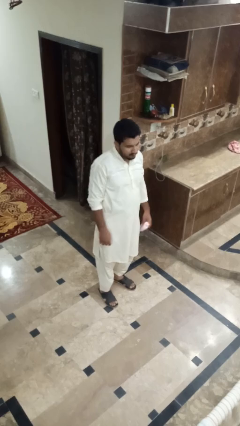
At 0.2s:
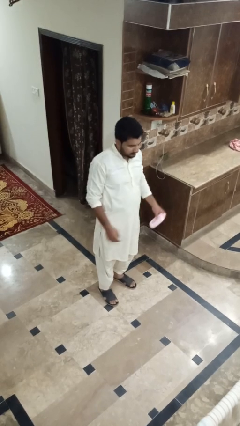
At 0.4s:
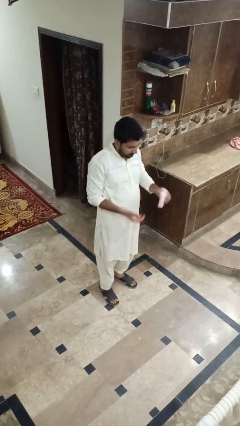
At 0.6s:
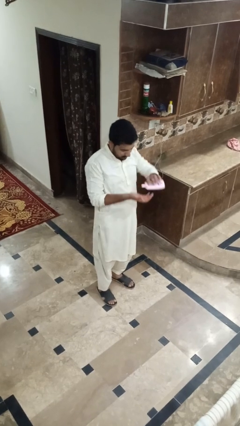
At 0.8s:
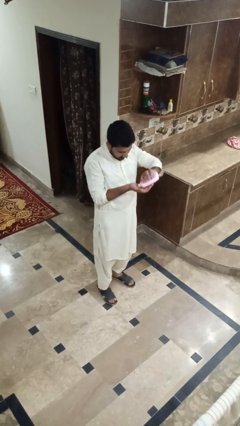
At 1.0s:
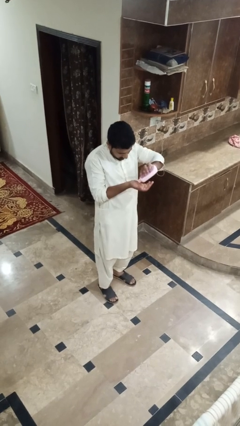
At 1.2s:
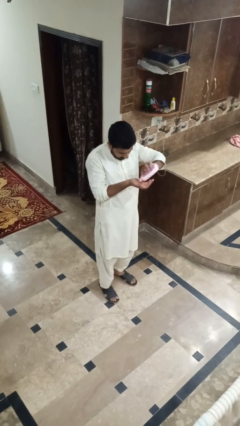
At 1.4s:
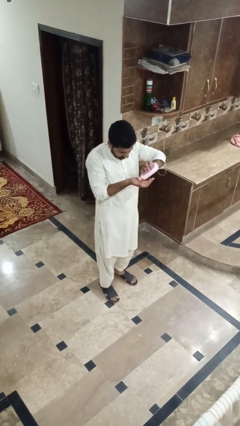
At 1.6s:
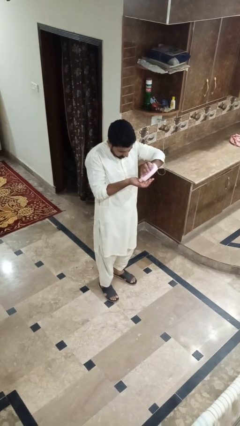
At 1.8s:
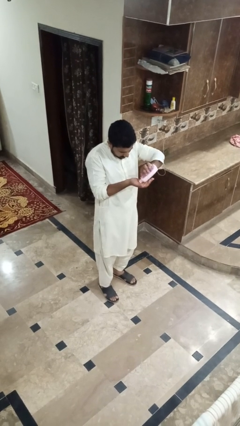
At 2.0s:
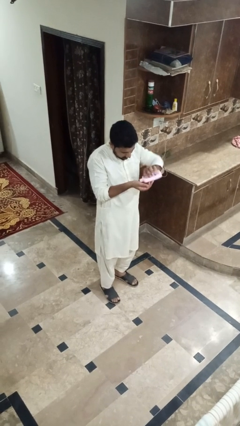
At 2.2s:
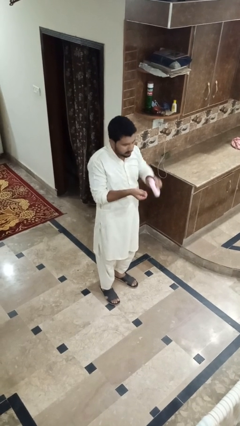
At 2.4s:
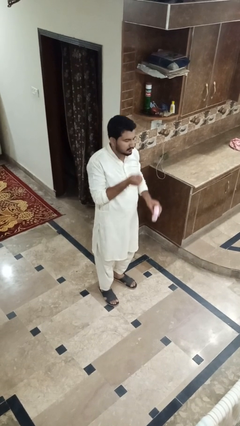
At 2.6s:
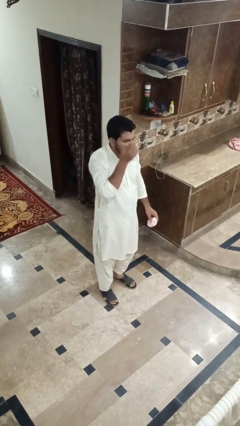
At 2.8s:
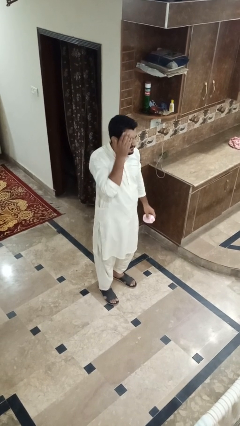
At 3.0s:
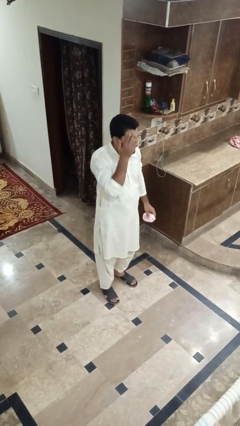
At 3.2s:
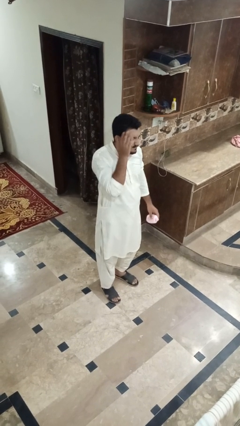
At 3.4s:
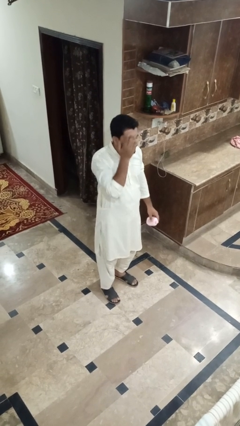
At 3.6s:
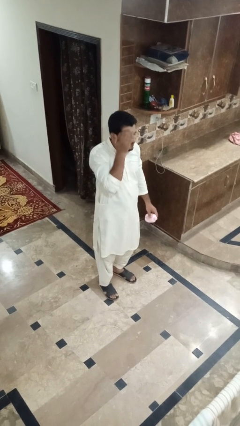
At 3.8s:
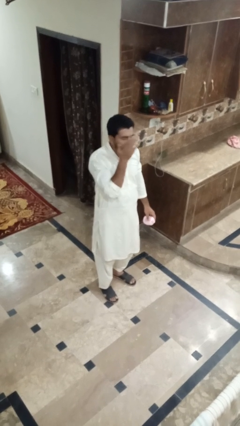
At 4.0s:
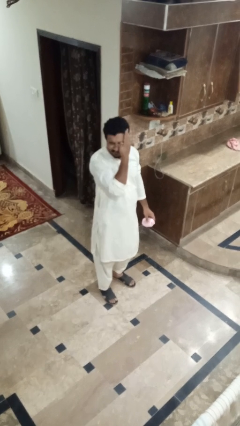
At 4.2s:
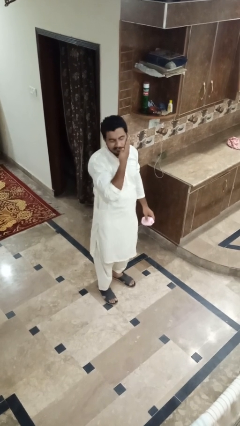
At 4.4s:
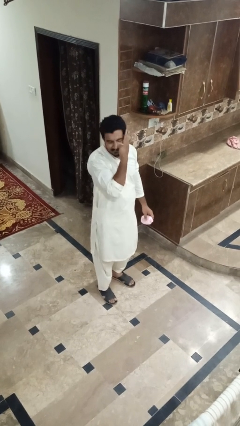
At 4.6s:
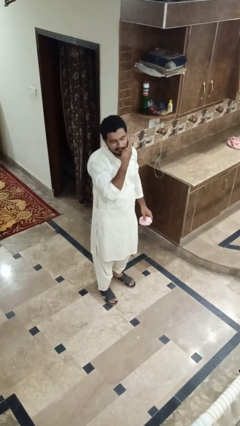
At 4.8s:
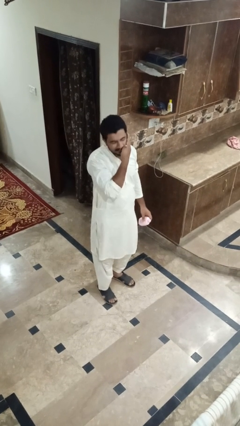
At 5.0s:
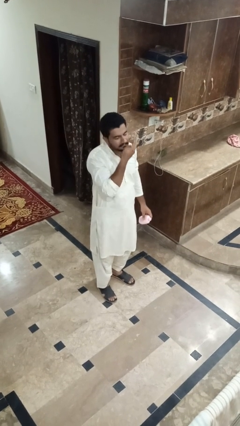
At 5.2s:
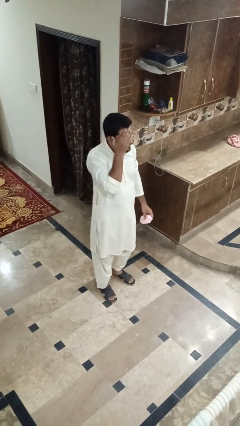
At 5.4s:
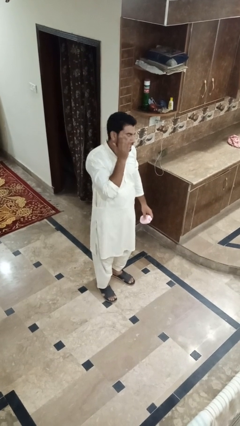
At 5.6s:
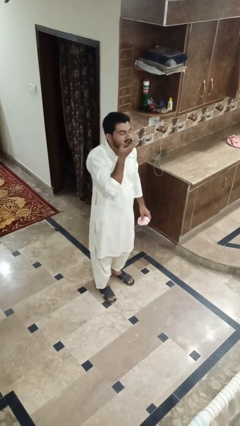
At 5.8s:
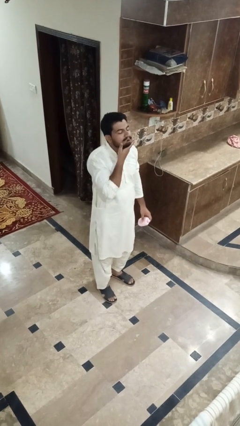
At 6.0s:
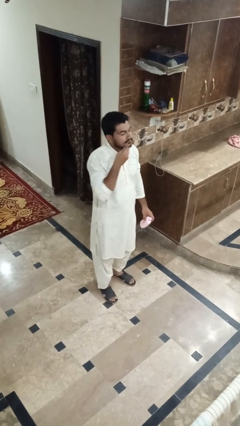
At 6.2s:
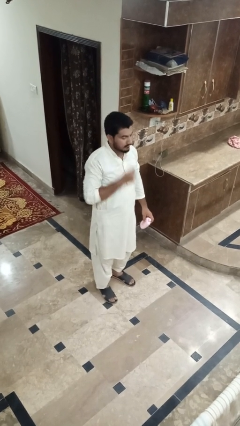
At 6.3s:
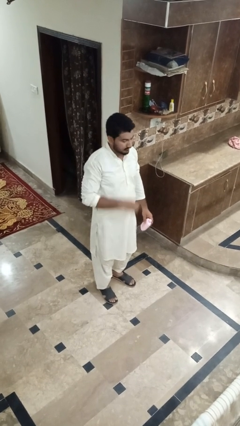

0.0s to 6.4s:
person applies facial moisturizer

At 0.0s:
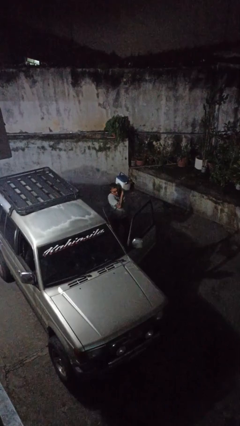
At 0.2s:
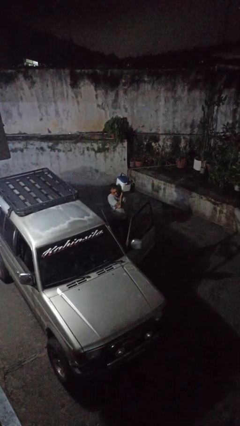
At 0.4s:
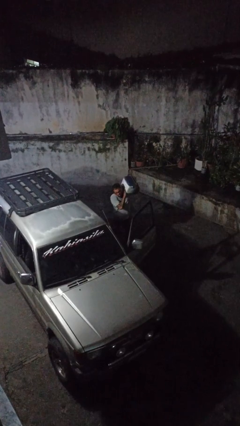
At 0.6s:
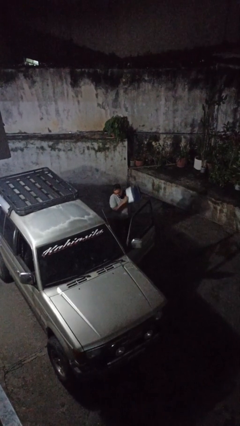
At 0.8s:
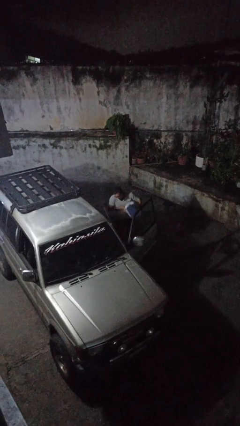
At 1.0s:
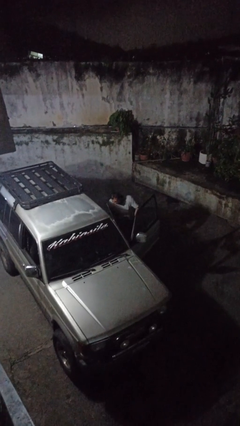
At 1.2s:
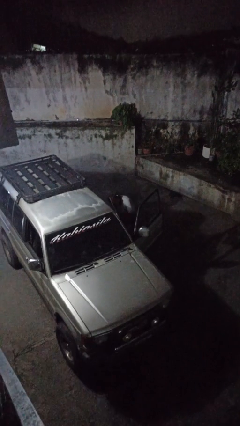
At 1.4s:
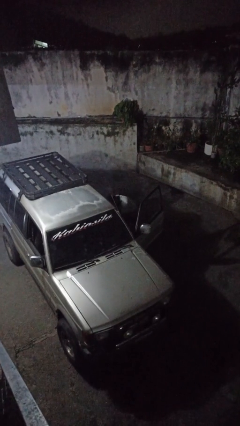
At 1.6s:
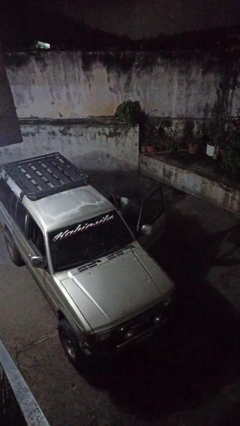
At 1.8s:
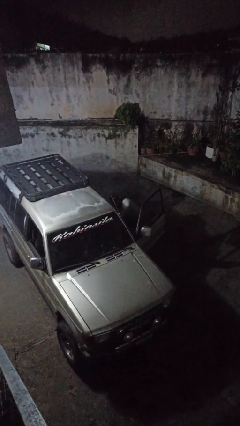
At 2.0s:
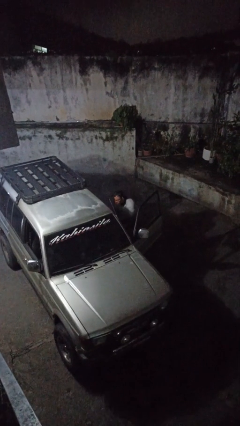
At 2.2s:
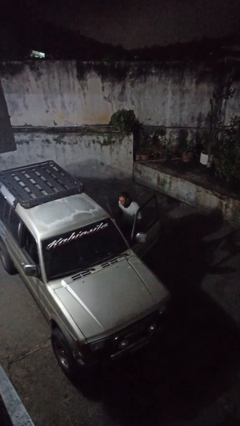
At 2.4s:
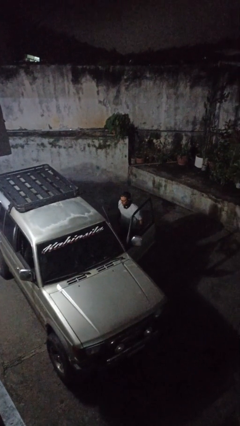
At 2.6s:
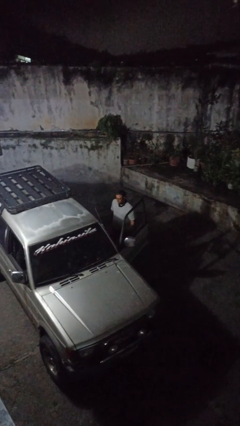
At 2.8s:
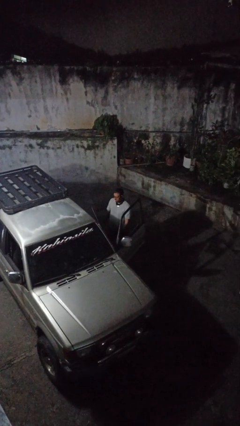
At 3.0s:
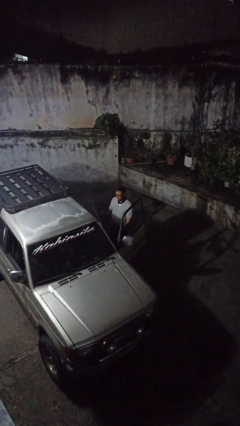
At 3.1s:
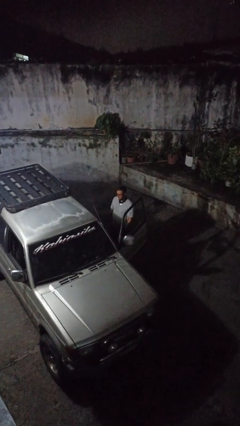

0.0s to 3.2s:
person loads car

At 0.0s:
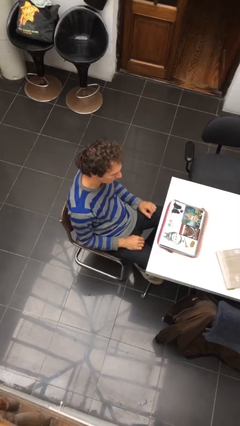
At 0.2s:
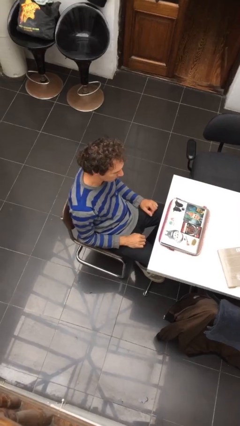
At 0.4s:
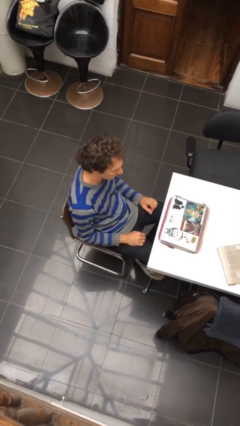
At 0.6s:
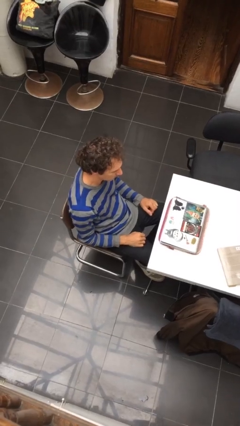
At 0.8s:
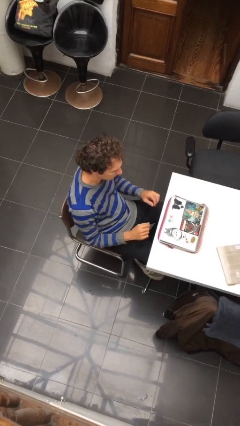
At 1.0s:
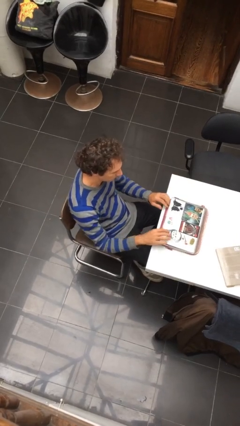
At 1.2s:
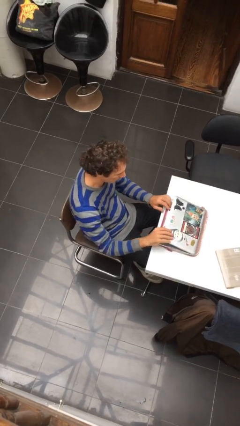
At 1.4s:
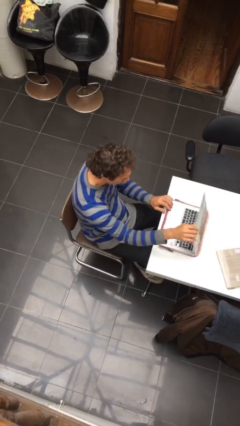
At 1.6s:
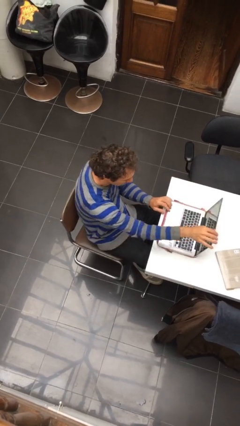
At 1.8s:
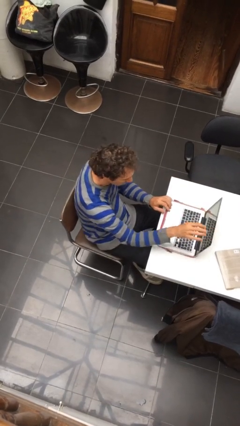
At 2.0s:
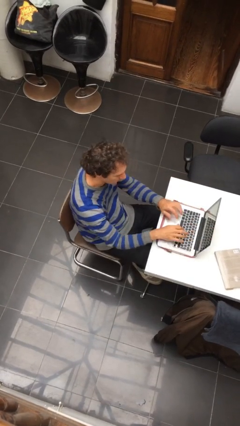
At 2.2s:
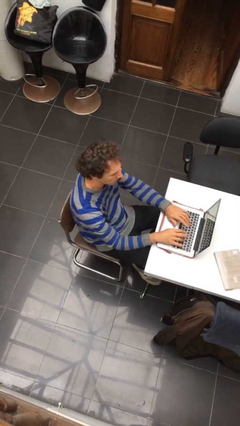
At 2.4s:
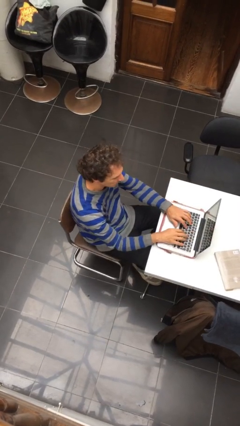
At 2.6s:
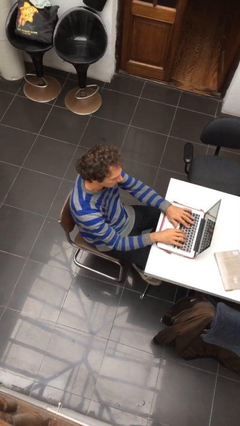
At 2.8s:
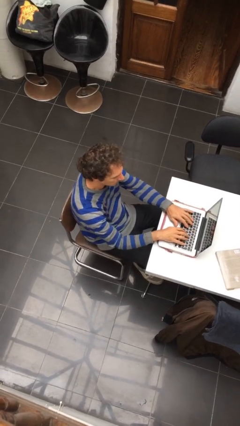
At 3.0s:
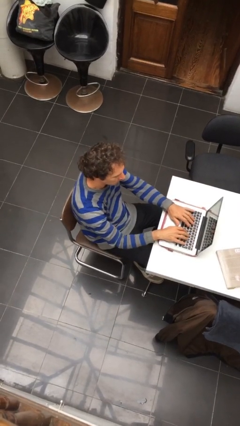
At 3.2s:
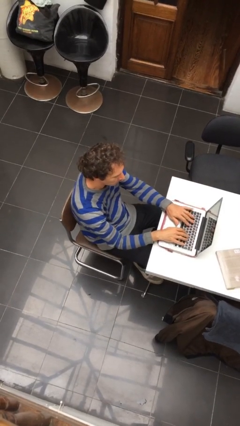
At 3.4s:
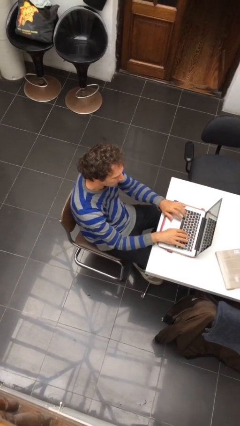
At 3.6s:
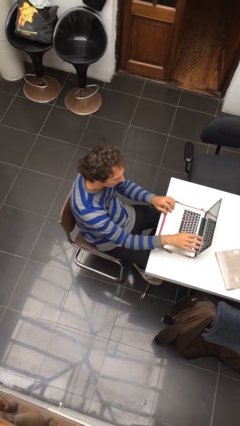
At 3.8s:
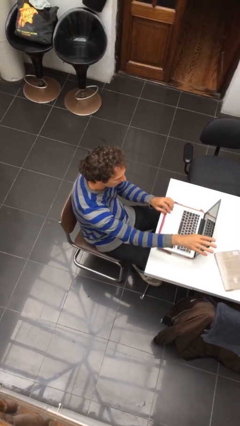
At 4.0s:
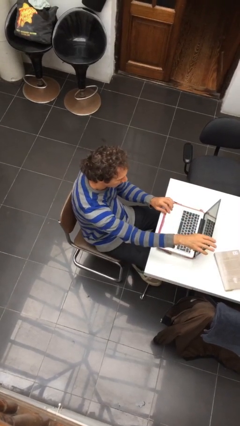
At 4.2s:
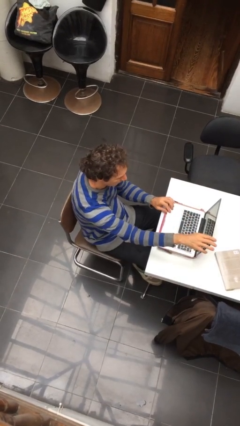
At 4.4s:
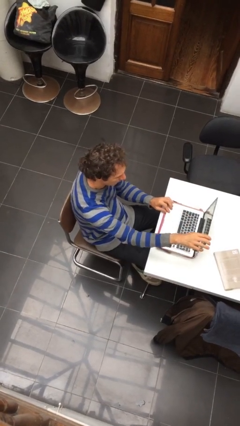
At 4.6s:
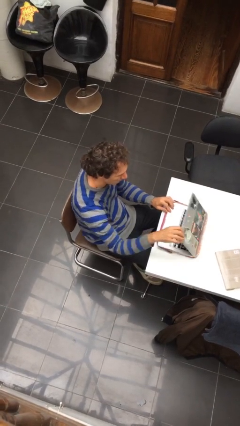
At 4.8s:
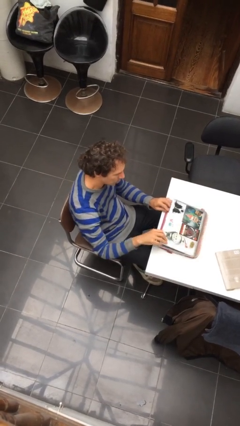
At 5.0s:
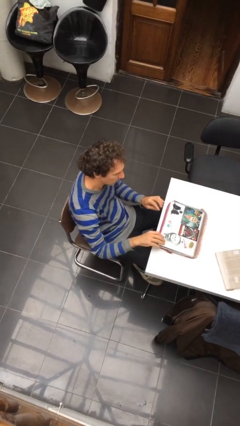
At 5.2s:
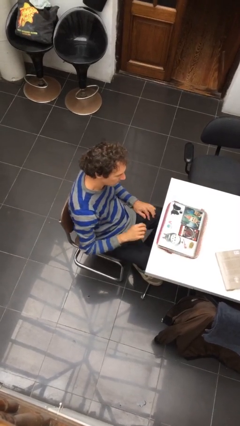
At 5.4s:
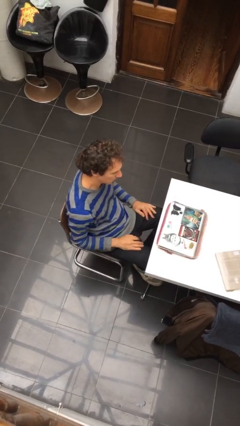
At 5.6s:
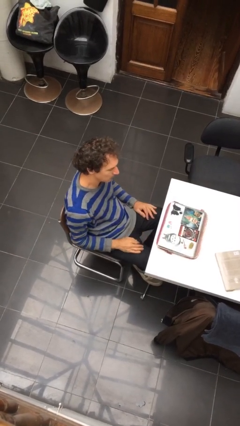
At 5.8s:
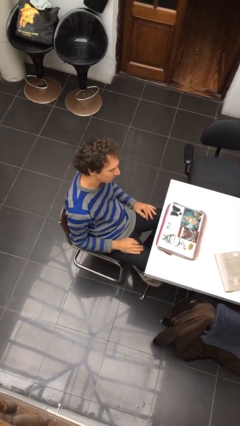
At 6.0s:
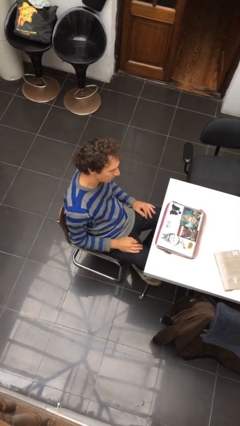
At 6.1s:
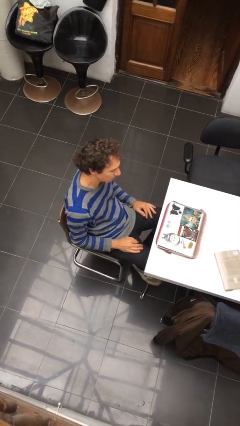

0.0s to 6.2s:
person interacts with laptop

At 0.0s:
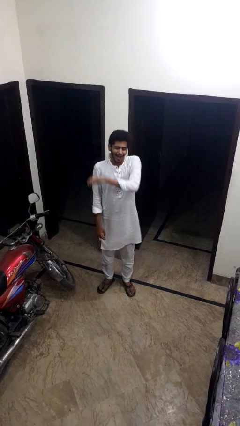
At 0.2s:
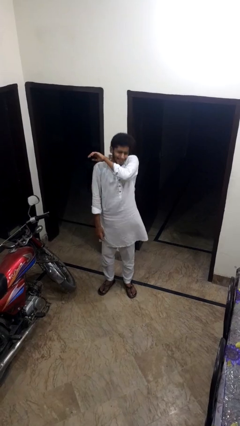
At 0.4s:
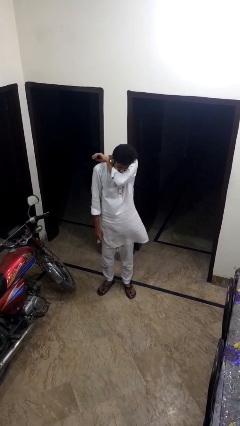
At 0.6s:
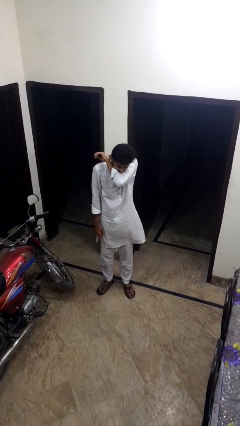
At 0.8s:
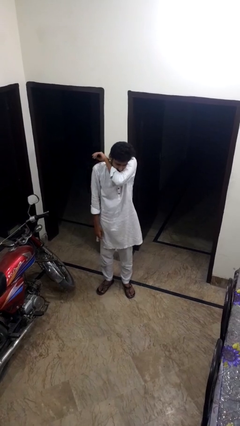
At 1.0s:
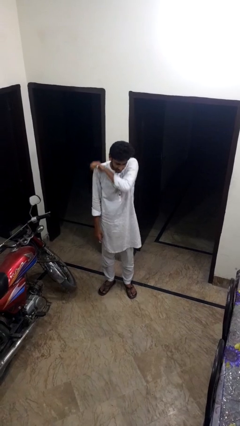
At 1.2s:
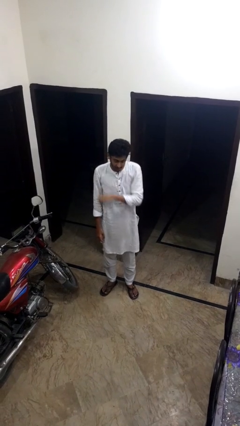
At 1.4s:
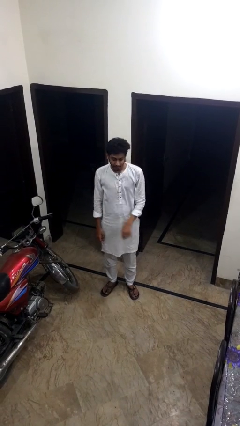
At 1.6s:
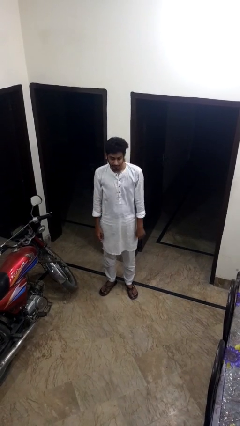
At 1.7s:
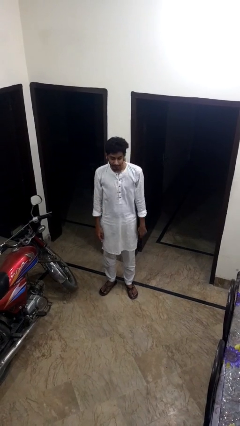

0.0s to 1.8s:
person sneezes into arm

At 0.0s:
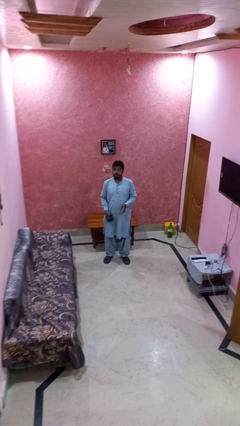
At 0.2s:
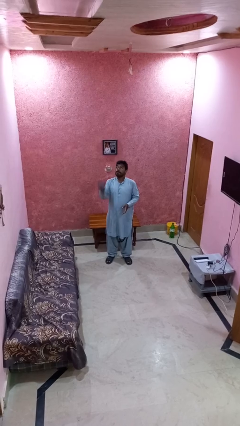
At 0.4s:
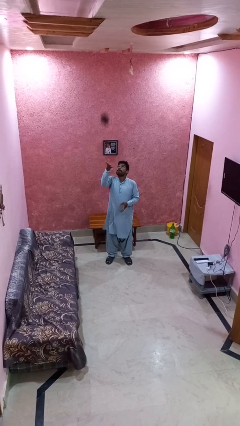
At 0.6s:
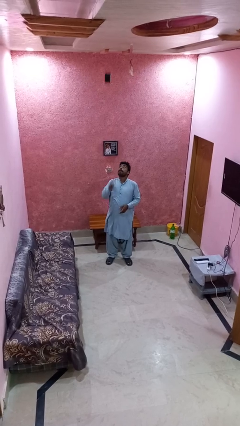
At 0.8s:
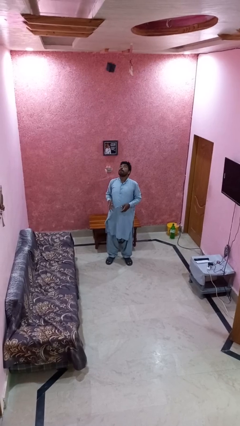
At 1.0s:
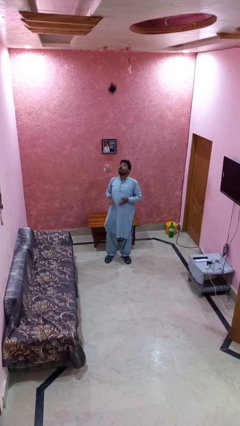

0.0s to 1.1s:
person drops object
